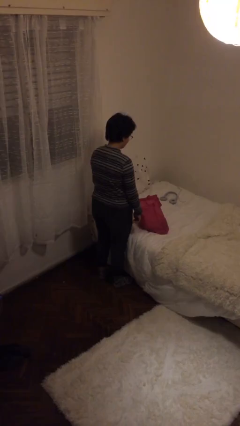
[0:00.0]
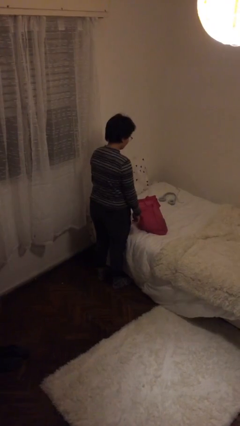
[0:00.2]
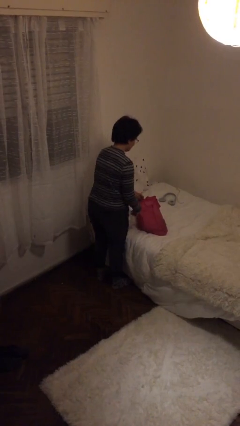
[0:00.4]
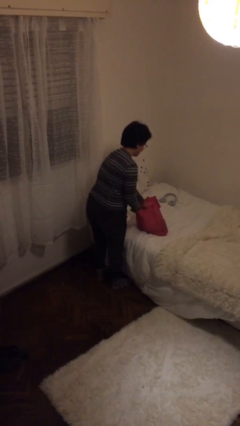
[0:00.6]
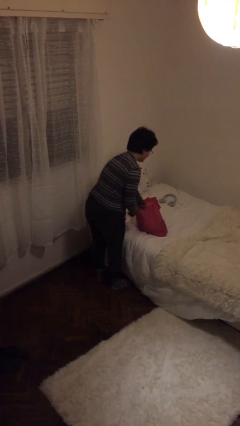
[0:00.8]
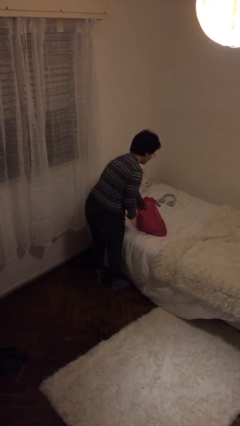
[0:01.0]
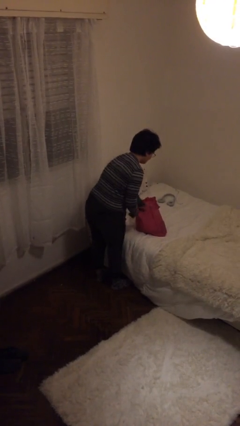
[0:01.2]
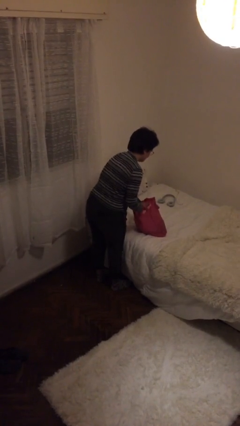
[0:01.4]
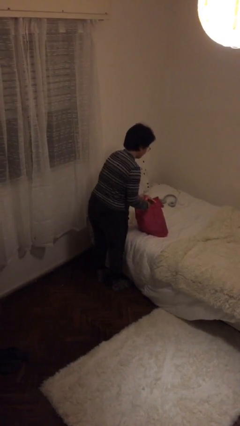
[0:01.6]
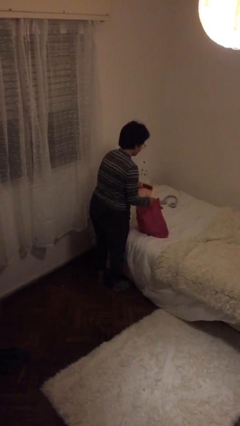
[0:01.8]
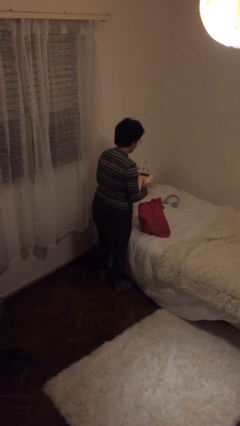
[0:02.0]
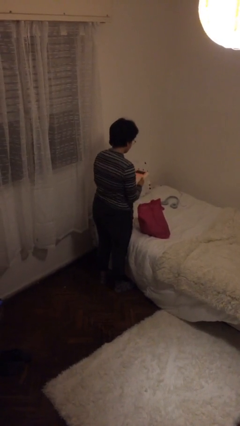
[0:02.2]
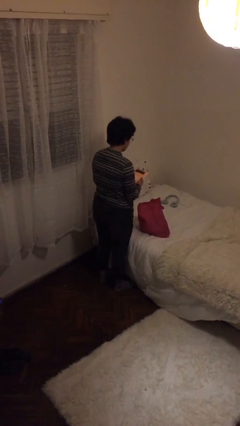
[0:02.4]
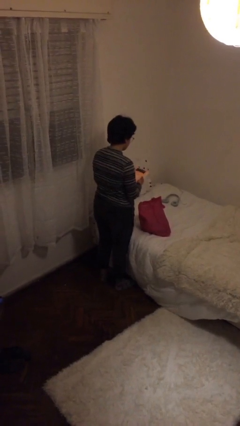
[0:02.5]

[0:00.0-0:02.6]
person takes object from bag

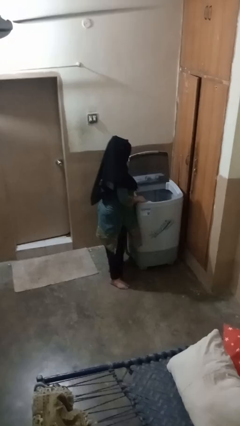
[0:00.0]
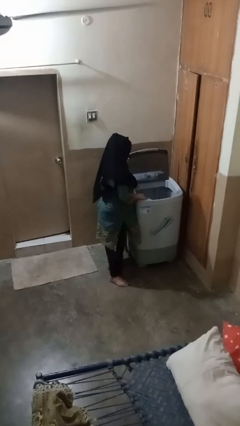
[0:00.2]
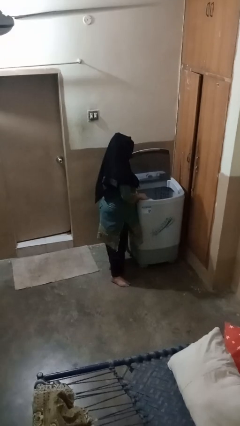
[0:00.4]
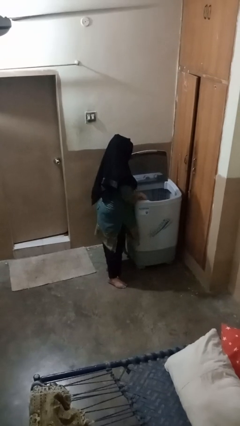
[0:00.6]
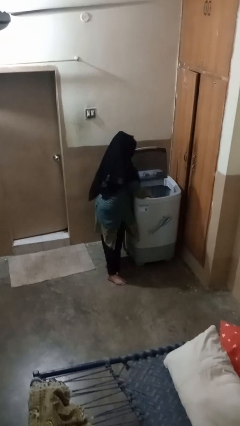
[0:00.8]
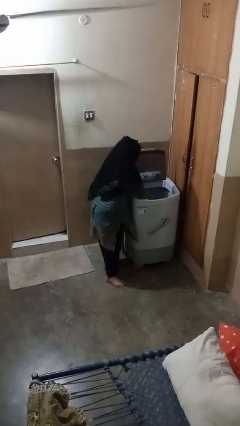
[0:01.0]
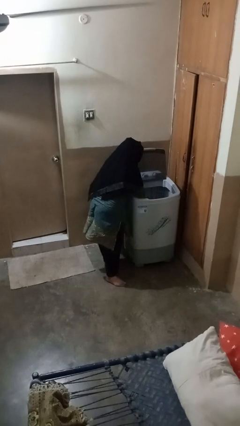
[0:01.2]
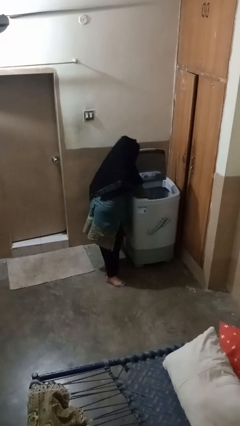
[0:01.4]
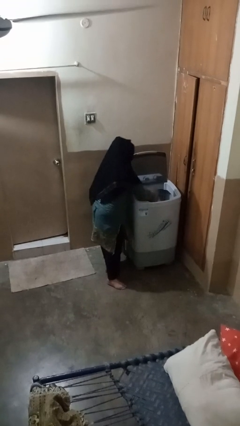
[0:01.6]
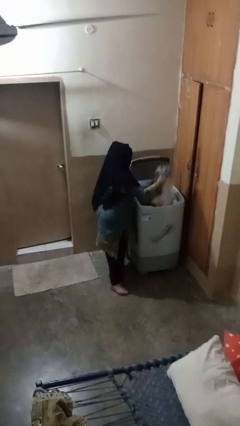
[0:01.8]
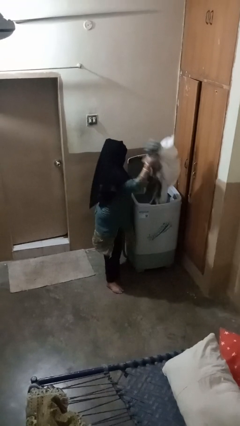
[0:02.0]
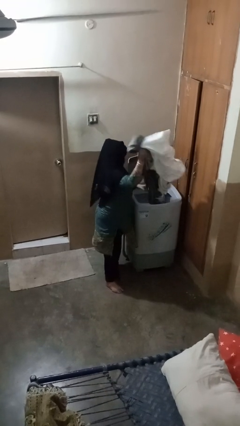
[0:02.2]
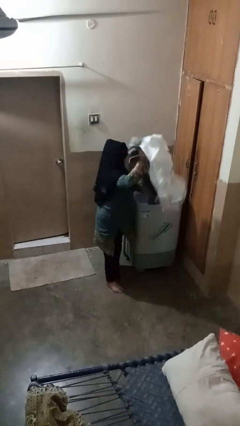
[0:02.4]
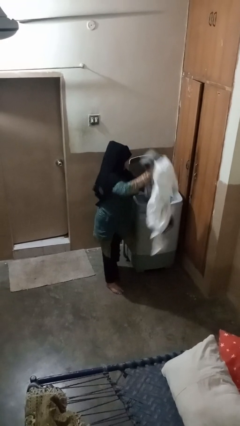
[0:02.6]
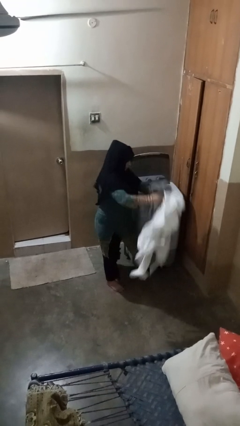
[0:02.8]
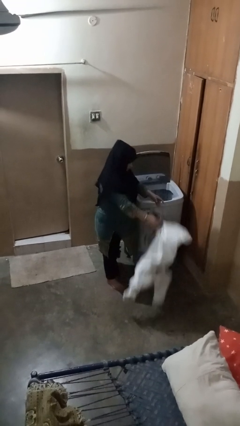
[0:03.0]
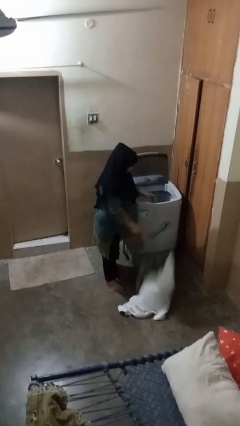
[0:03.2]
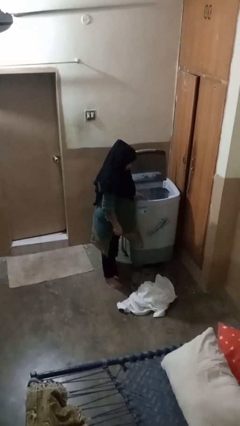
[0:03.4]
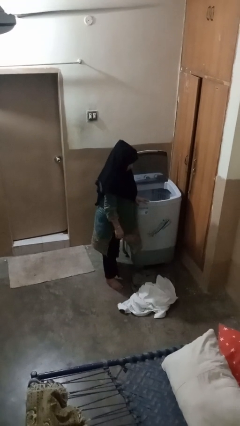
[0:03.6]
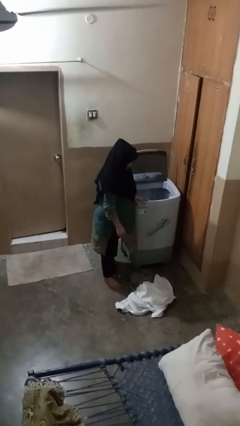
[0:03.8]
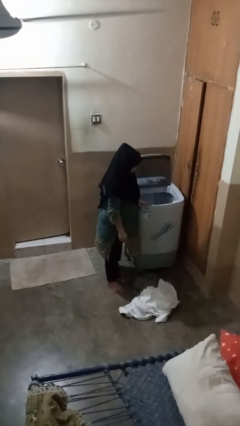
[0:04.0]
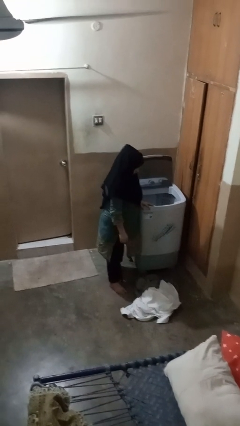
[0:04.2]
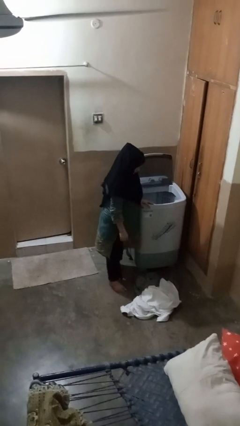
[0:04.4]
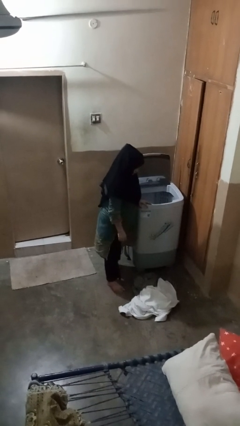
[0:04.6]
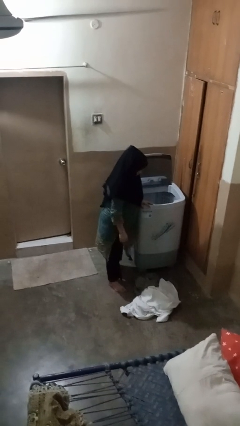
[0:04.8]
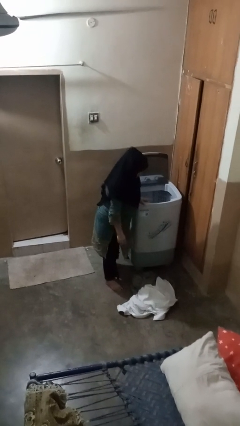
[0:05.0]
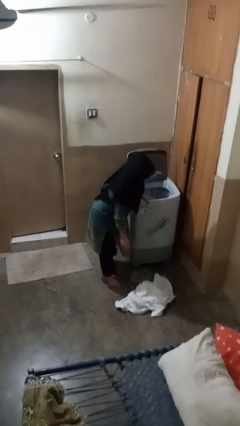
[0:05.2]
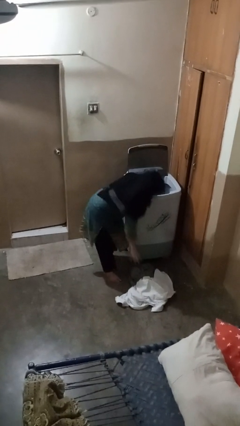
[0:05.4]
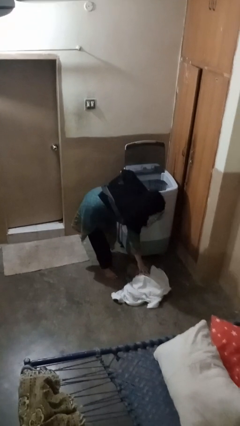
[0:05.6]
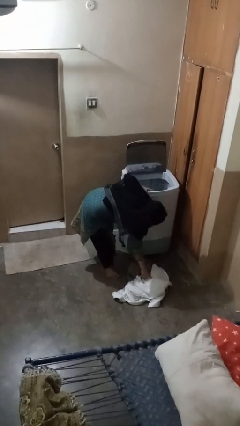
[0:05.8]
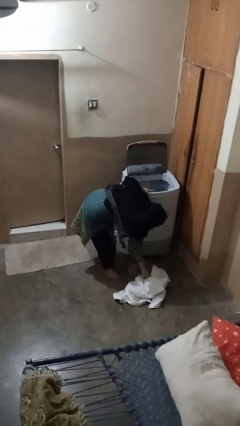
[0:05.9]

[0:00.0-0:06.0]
person unloads clotheswasher

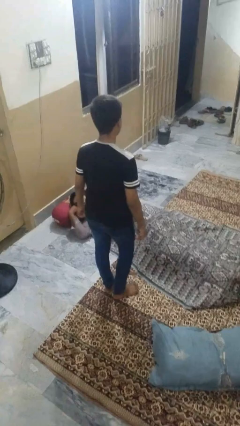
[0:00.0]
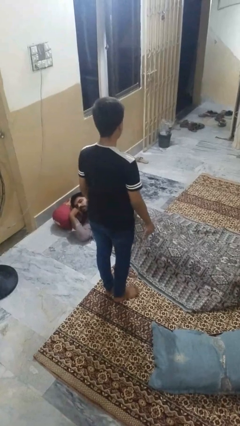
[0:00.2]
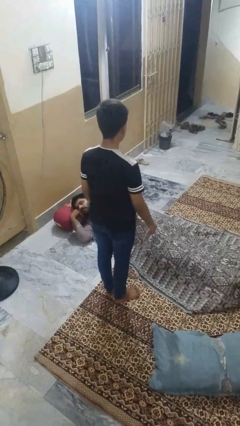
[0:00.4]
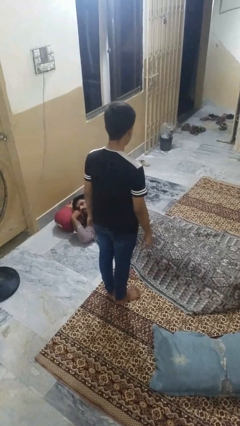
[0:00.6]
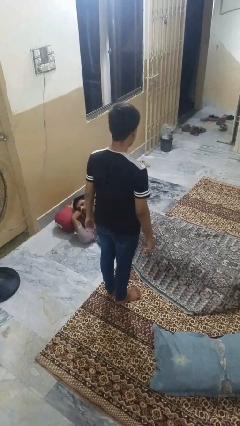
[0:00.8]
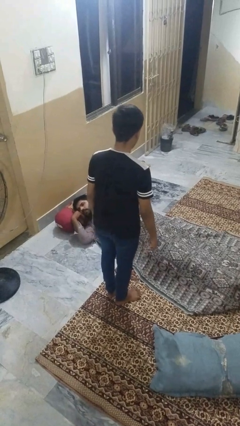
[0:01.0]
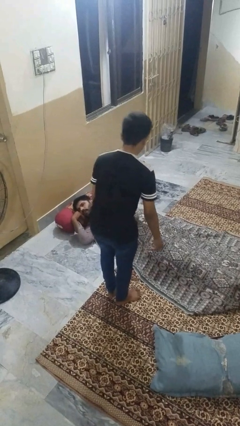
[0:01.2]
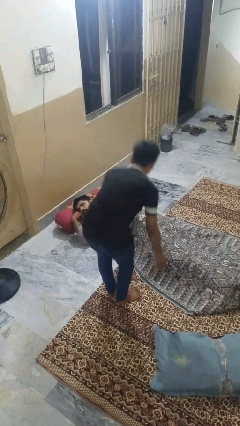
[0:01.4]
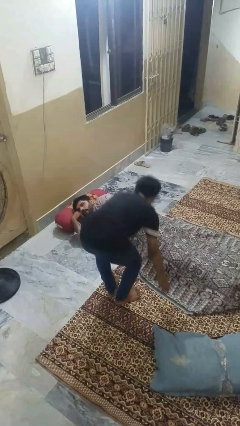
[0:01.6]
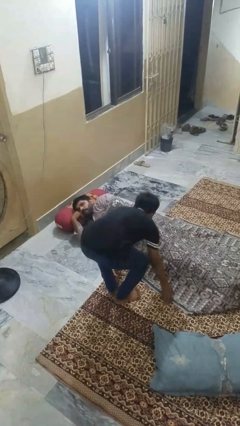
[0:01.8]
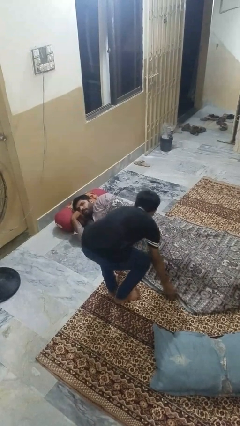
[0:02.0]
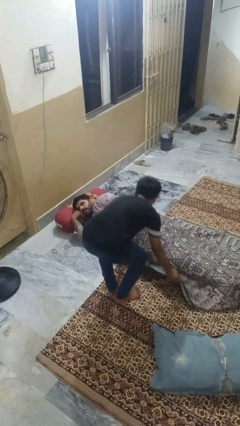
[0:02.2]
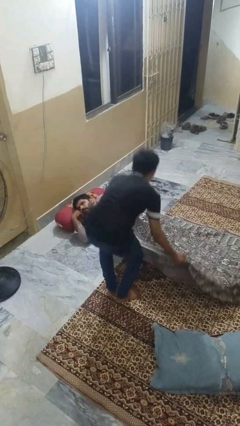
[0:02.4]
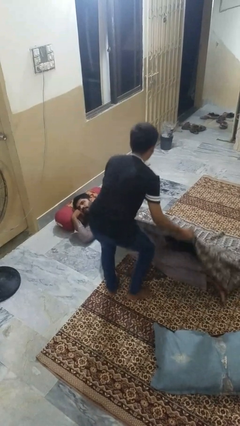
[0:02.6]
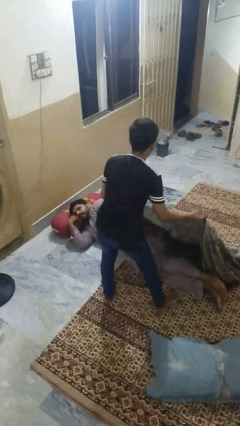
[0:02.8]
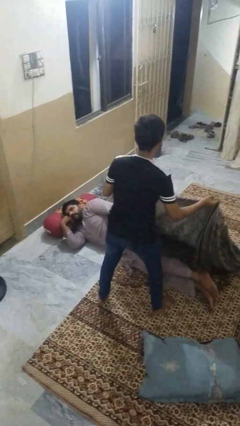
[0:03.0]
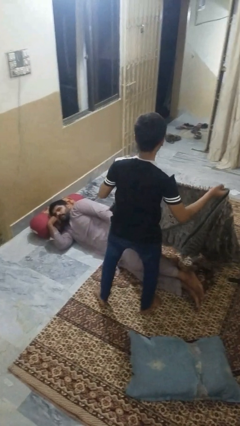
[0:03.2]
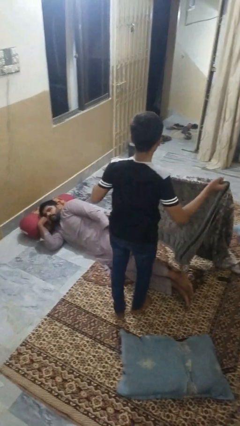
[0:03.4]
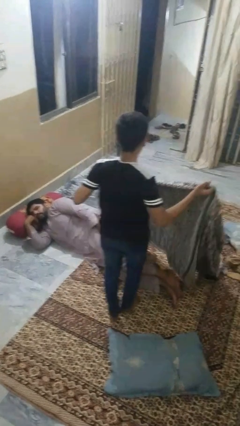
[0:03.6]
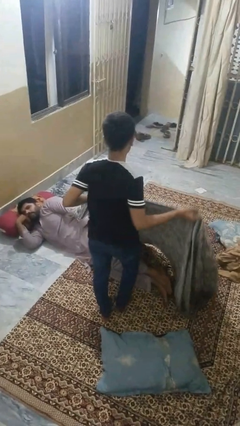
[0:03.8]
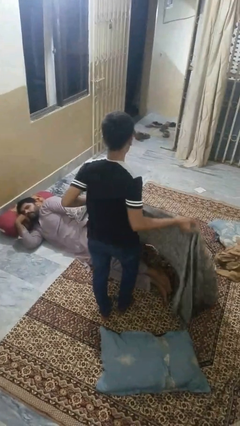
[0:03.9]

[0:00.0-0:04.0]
person uncovers friend with blanket

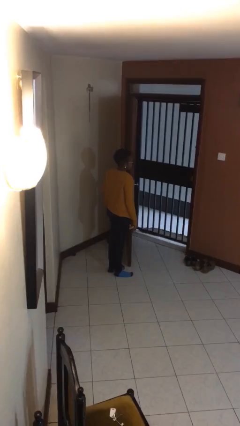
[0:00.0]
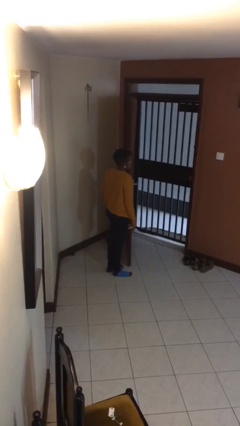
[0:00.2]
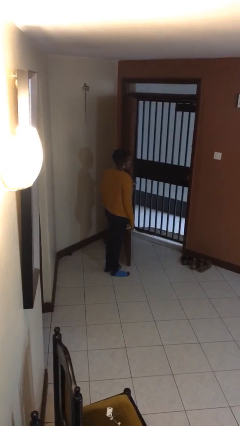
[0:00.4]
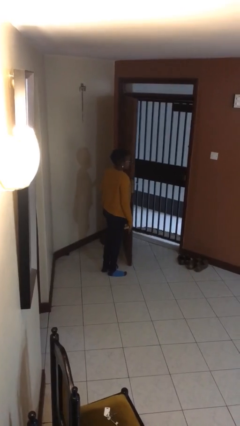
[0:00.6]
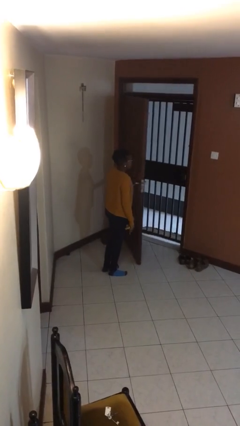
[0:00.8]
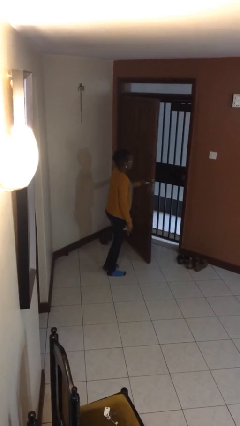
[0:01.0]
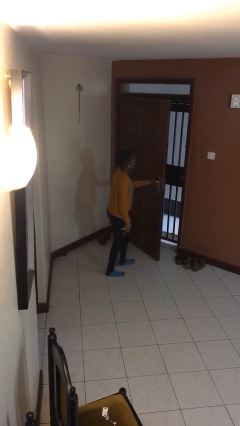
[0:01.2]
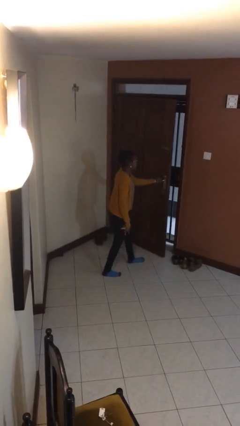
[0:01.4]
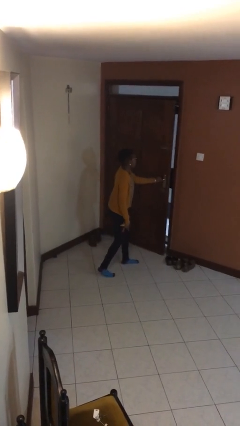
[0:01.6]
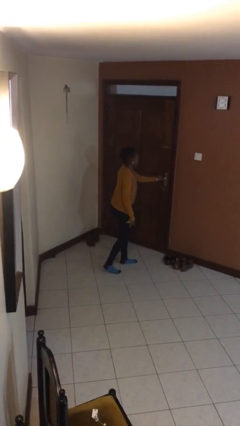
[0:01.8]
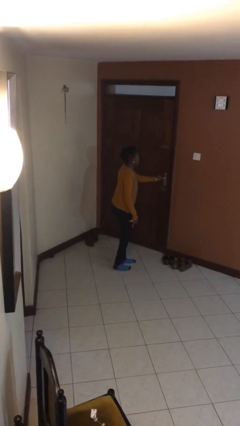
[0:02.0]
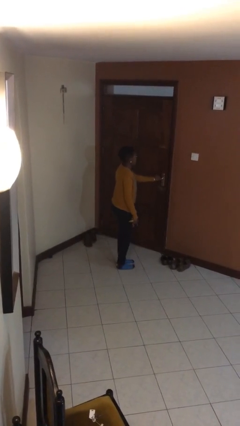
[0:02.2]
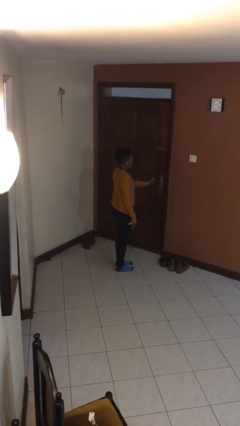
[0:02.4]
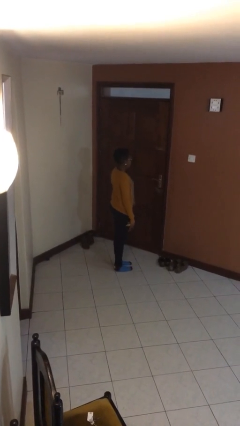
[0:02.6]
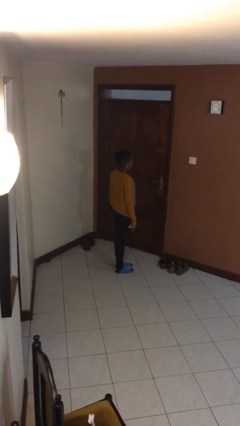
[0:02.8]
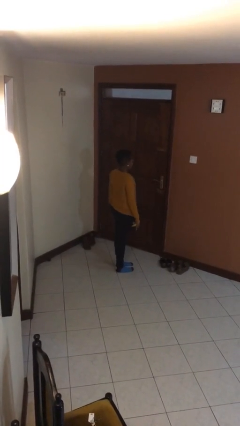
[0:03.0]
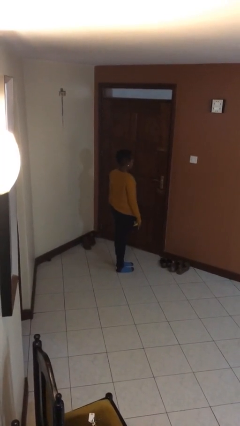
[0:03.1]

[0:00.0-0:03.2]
person closes facility door

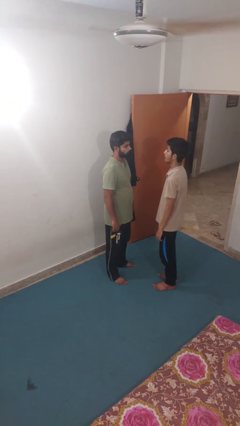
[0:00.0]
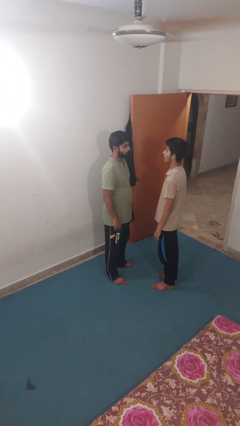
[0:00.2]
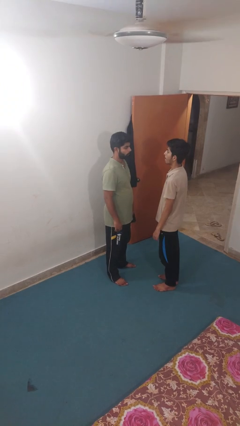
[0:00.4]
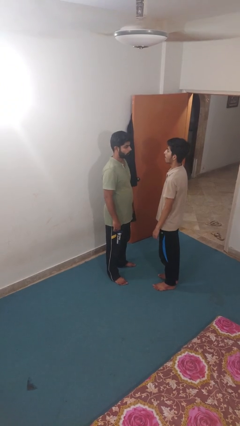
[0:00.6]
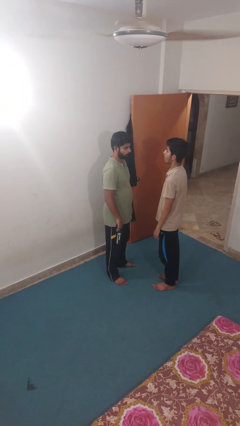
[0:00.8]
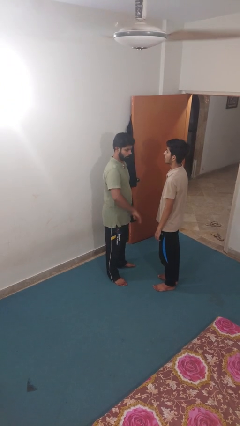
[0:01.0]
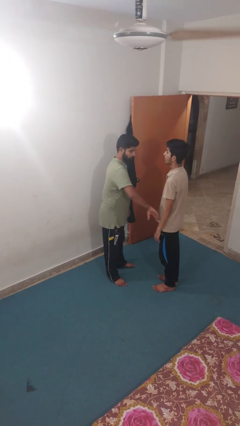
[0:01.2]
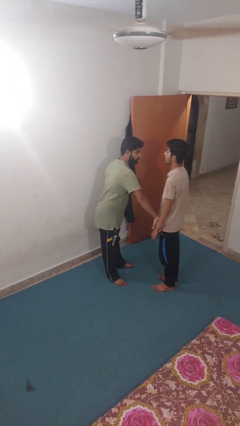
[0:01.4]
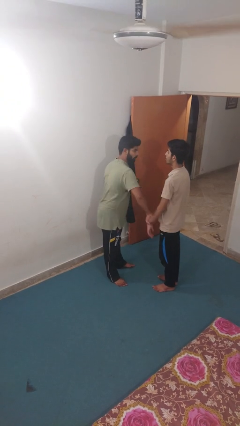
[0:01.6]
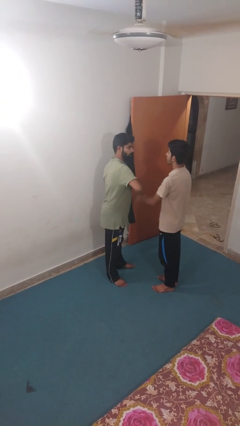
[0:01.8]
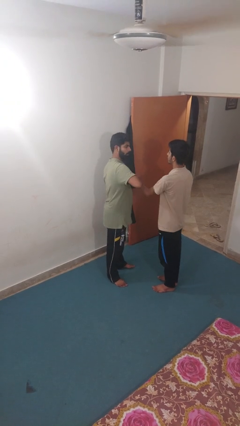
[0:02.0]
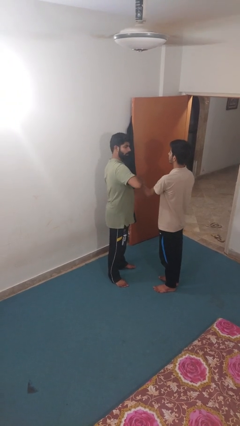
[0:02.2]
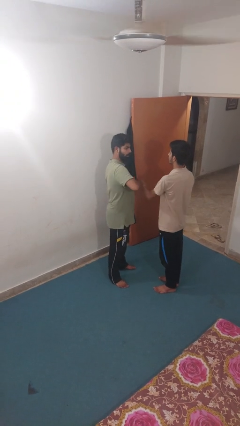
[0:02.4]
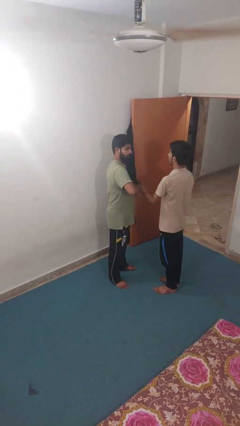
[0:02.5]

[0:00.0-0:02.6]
person grabs person by forearm
